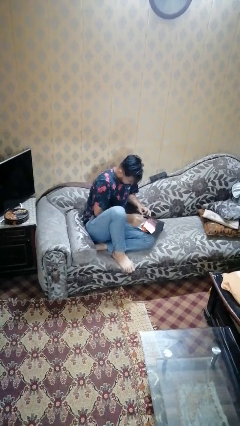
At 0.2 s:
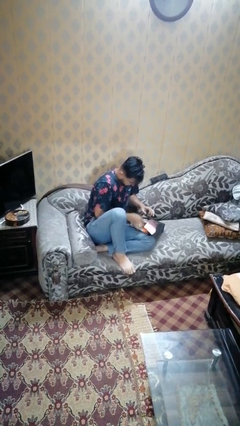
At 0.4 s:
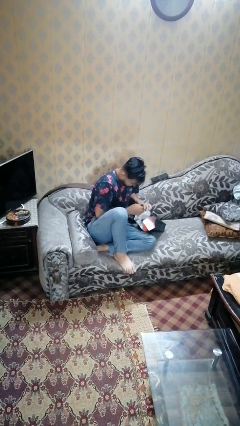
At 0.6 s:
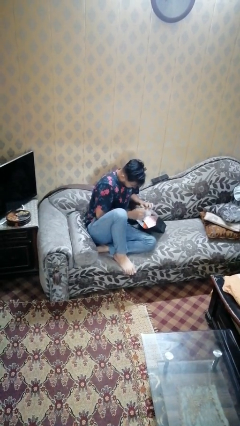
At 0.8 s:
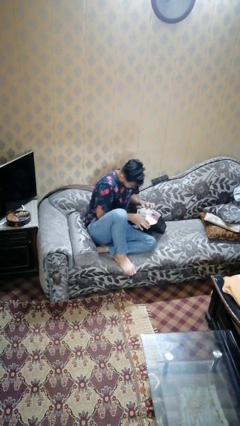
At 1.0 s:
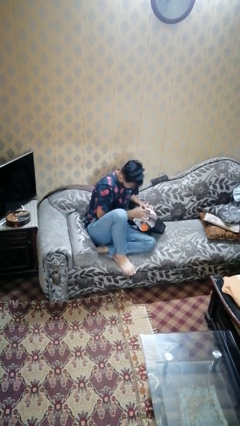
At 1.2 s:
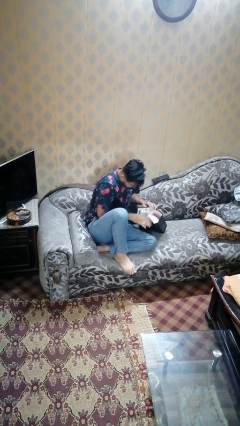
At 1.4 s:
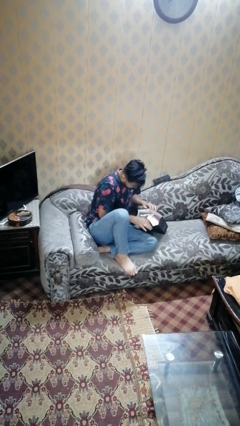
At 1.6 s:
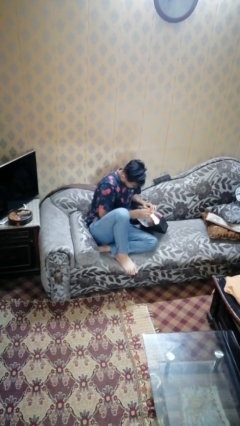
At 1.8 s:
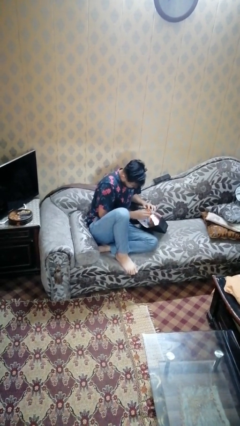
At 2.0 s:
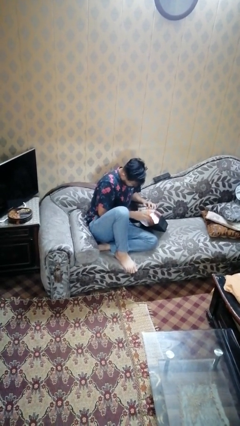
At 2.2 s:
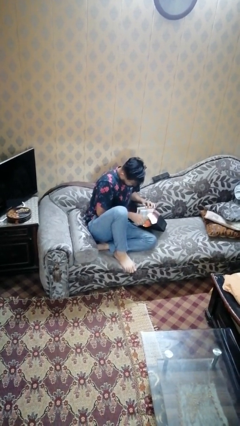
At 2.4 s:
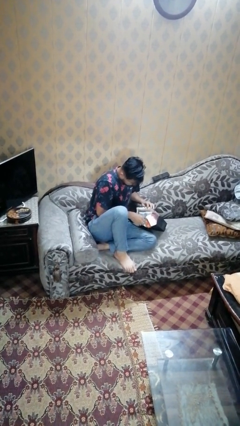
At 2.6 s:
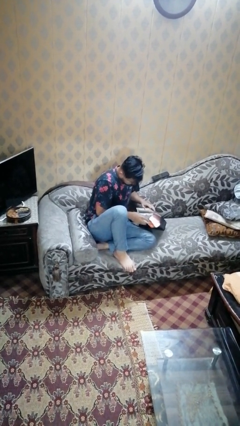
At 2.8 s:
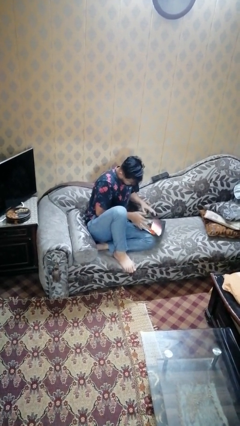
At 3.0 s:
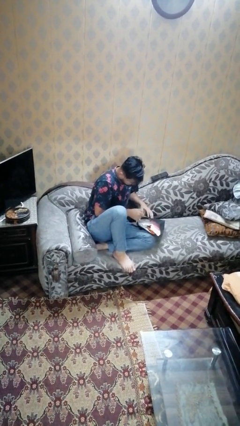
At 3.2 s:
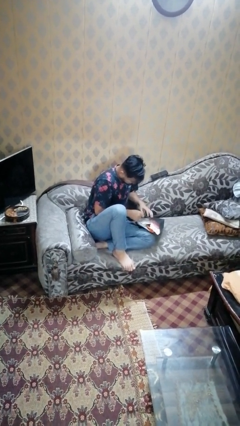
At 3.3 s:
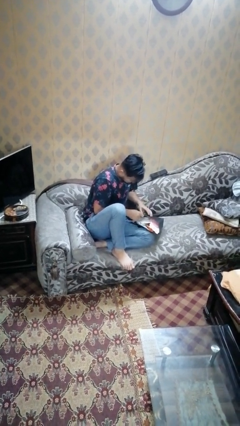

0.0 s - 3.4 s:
person searches in bag

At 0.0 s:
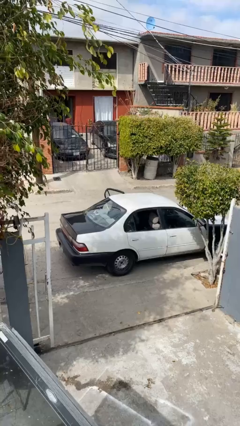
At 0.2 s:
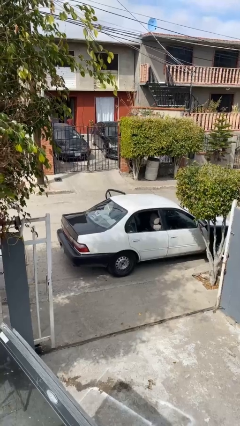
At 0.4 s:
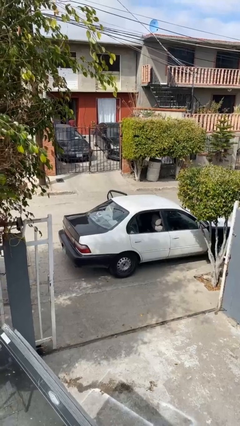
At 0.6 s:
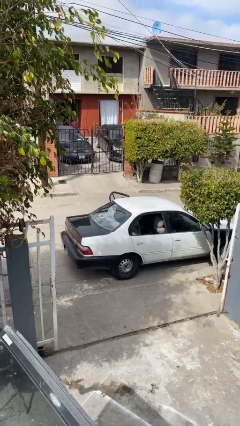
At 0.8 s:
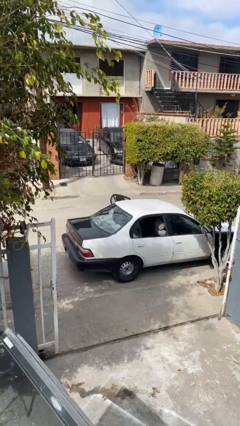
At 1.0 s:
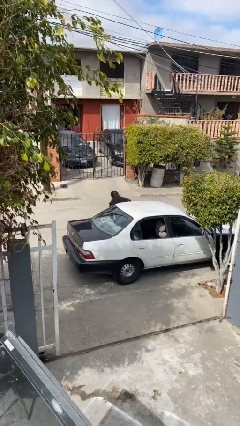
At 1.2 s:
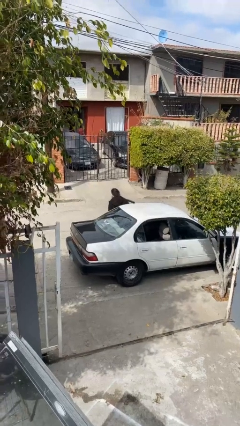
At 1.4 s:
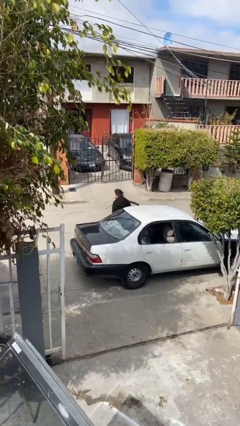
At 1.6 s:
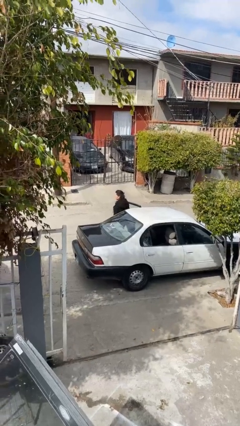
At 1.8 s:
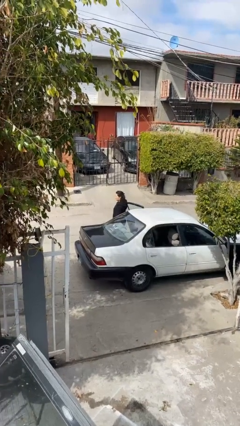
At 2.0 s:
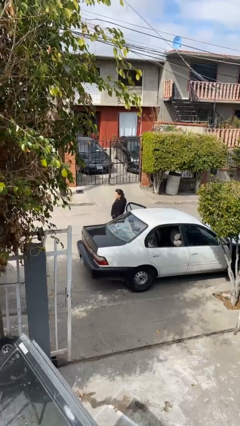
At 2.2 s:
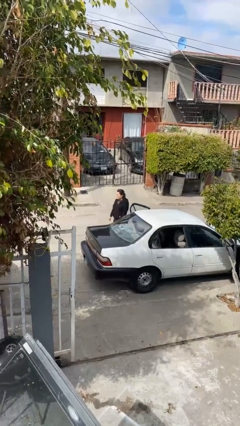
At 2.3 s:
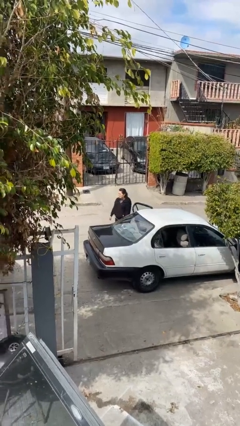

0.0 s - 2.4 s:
person exits car

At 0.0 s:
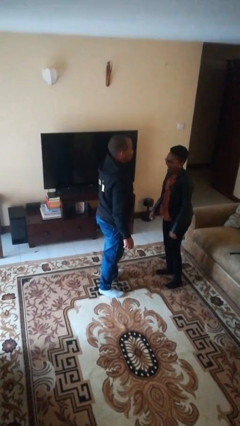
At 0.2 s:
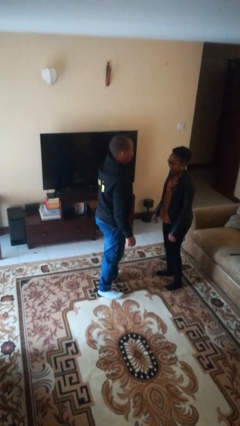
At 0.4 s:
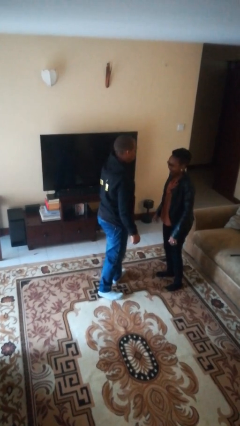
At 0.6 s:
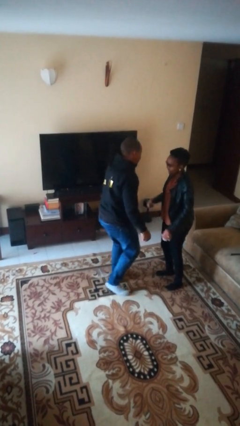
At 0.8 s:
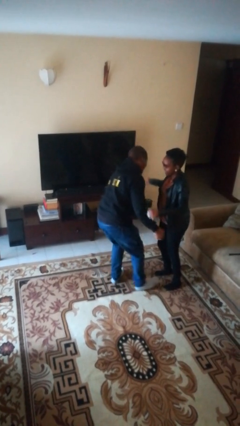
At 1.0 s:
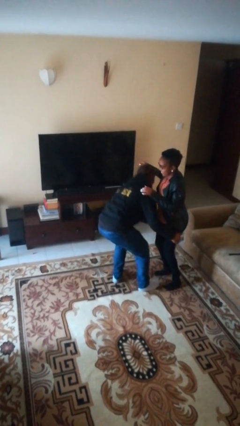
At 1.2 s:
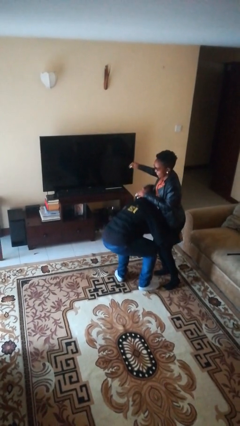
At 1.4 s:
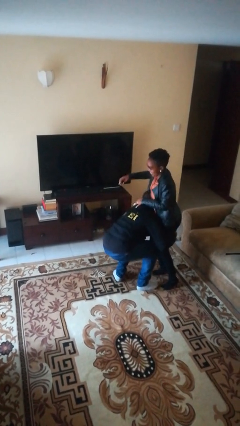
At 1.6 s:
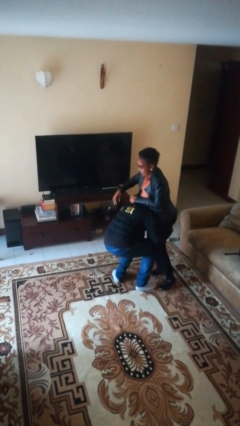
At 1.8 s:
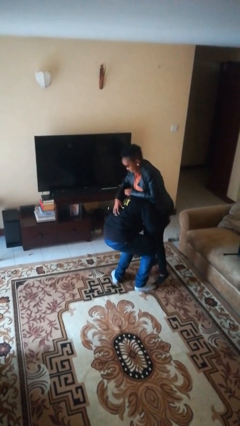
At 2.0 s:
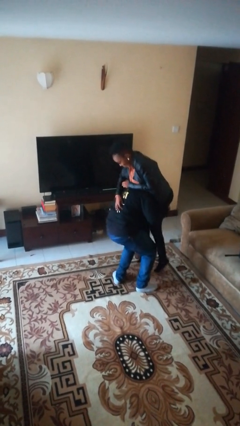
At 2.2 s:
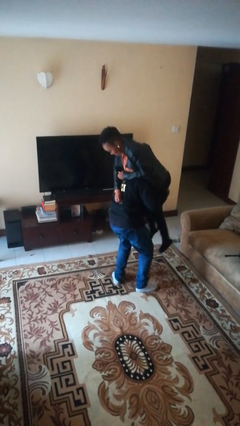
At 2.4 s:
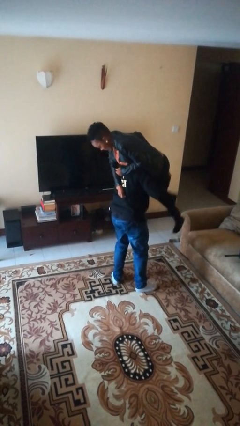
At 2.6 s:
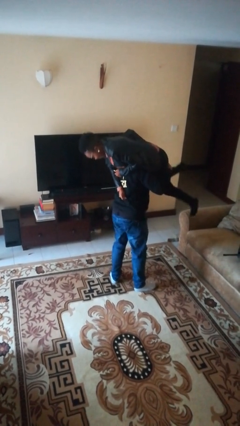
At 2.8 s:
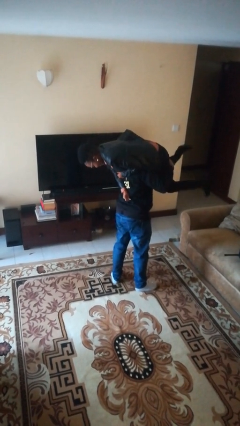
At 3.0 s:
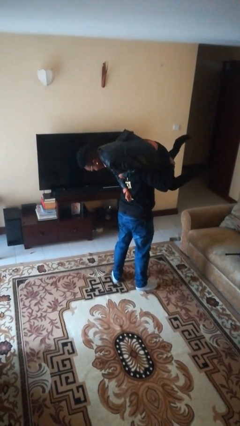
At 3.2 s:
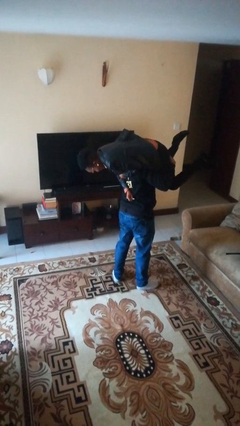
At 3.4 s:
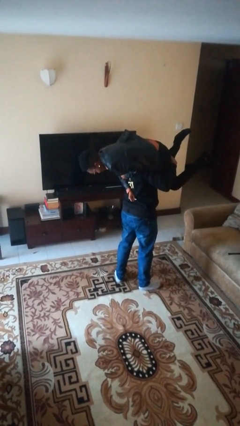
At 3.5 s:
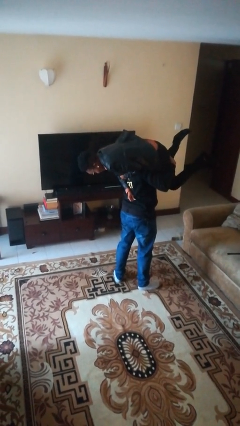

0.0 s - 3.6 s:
person carries person over shoulder

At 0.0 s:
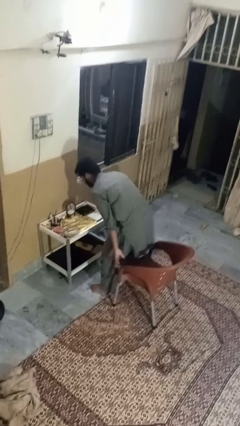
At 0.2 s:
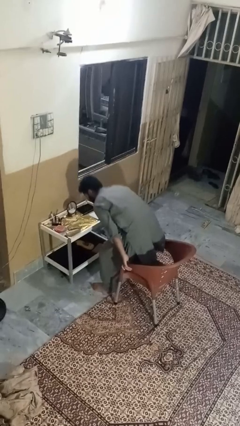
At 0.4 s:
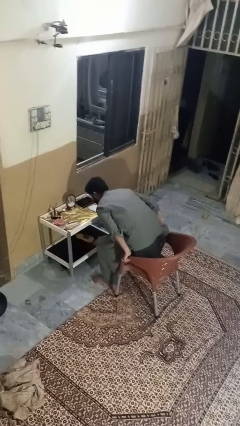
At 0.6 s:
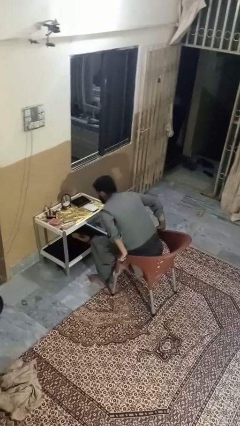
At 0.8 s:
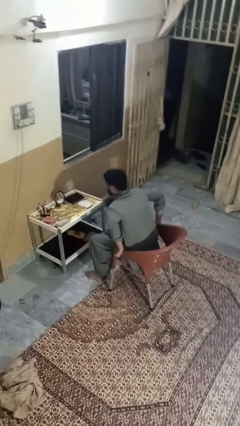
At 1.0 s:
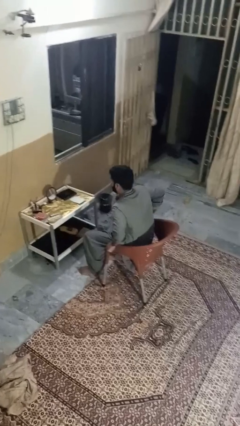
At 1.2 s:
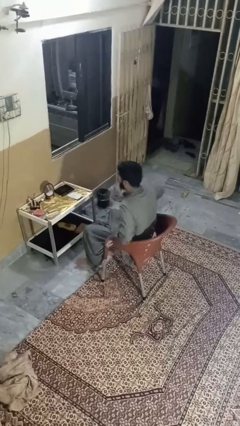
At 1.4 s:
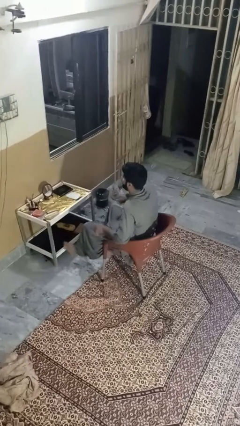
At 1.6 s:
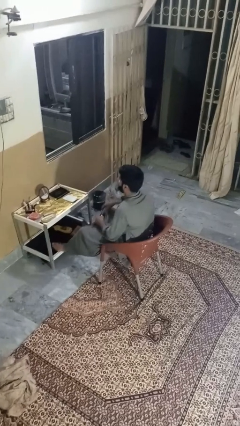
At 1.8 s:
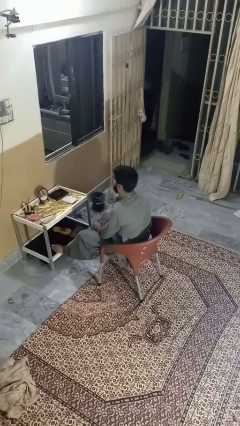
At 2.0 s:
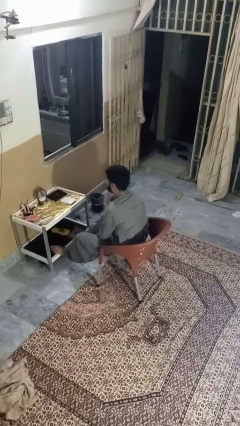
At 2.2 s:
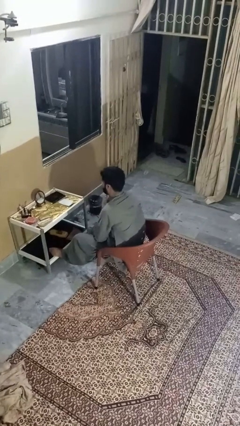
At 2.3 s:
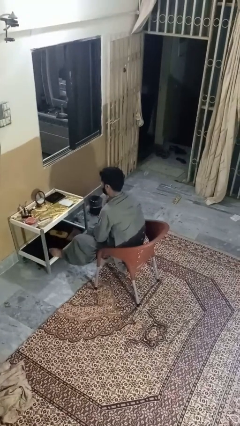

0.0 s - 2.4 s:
person sits down

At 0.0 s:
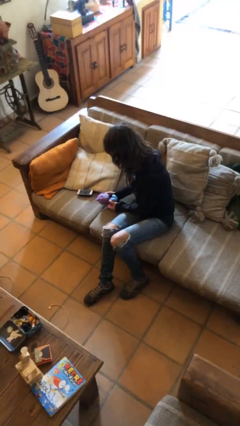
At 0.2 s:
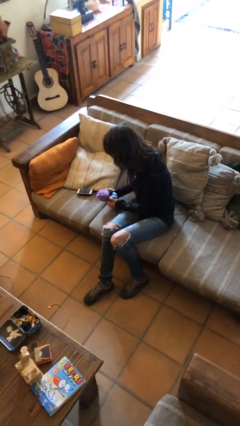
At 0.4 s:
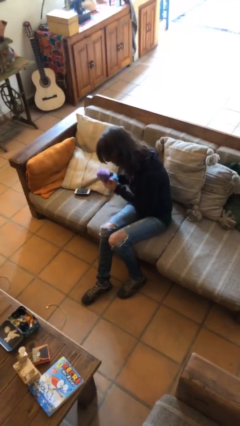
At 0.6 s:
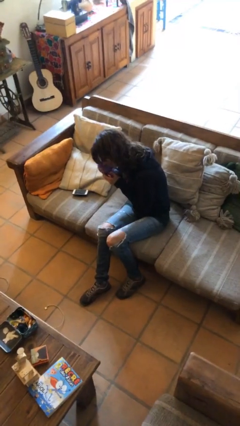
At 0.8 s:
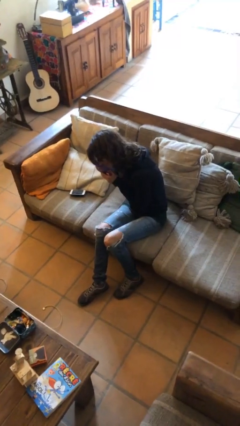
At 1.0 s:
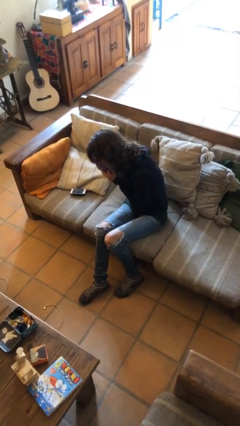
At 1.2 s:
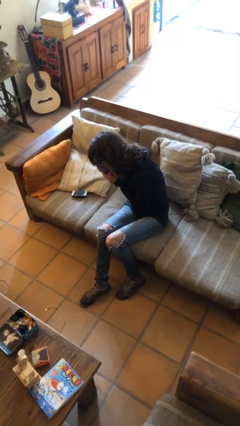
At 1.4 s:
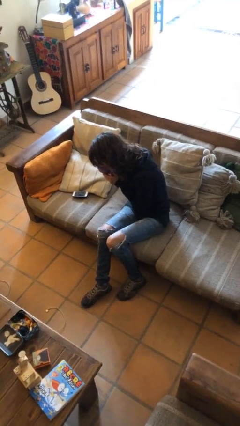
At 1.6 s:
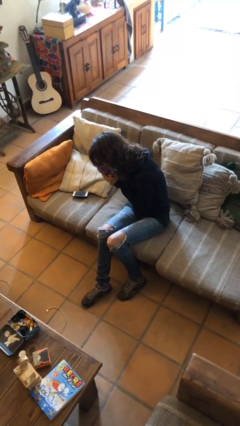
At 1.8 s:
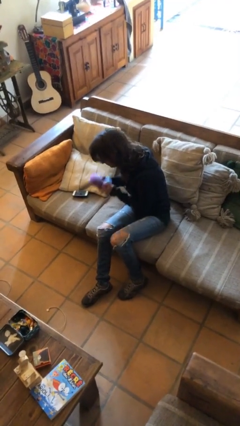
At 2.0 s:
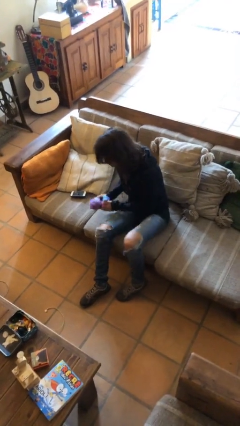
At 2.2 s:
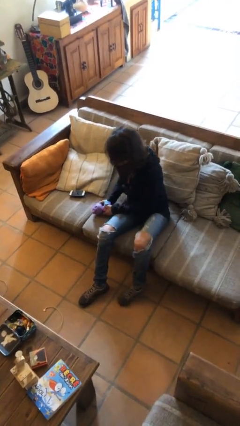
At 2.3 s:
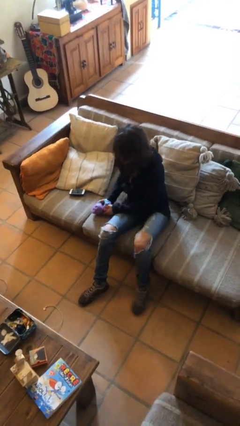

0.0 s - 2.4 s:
person hugs stuffed animal

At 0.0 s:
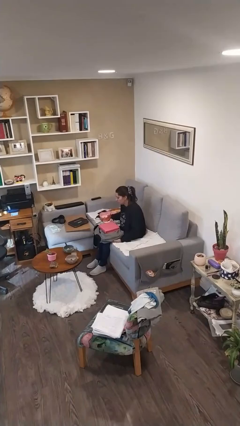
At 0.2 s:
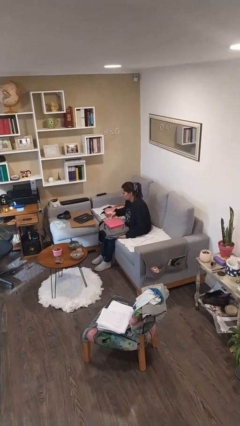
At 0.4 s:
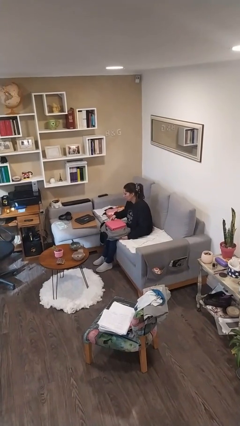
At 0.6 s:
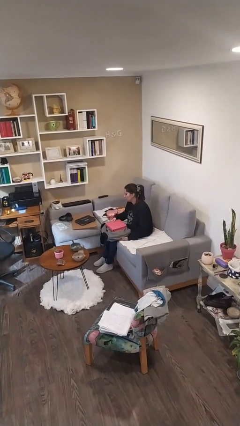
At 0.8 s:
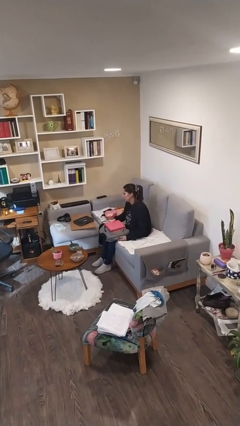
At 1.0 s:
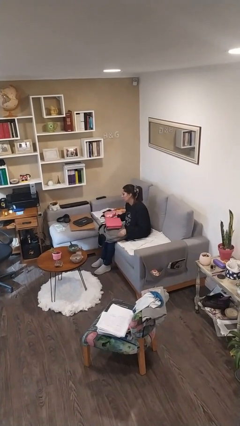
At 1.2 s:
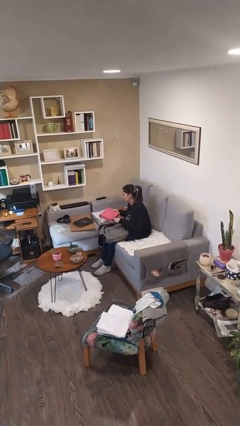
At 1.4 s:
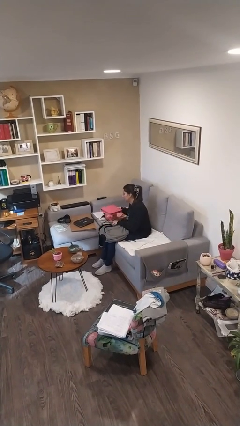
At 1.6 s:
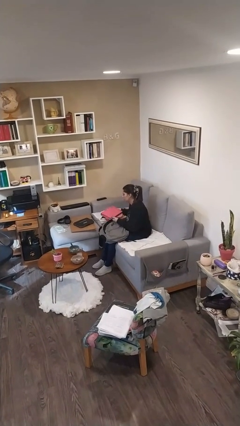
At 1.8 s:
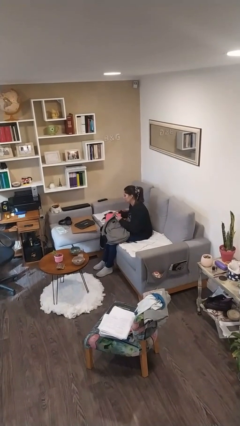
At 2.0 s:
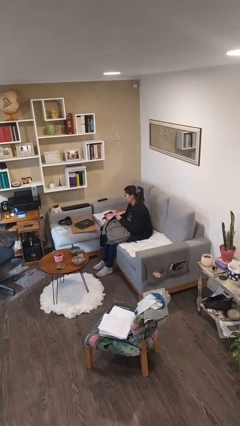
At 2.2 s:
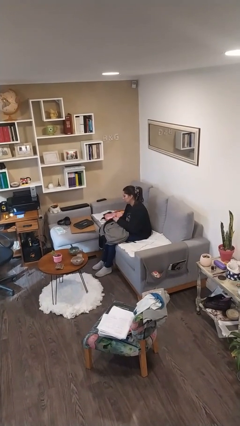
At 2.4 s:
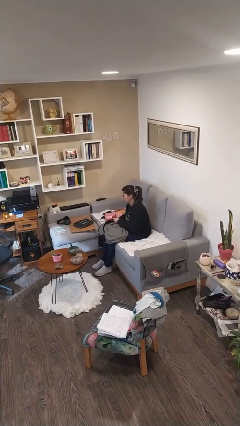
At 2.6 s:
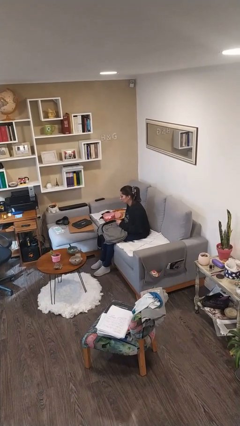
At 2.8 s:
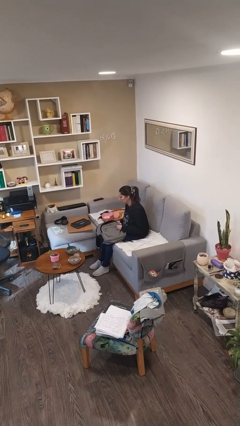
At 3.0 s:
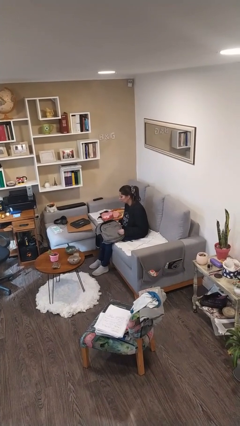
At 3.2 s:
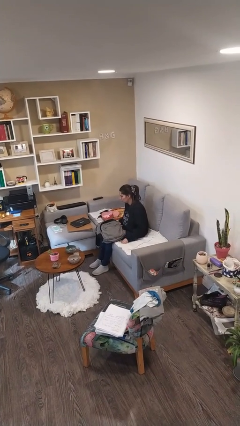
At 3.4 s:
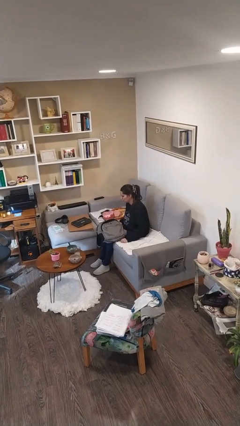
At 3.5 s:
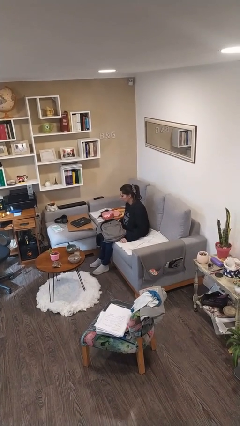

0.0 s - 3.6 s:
person puts object into backpack
